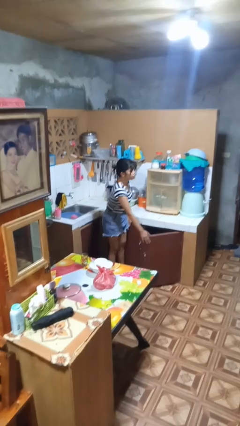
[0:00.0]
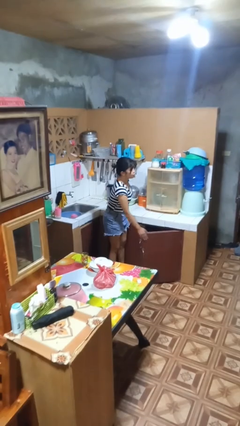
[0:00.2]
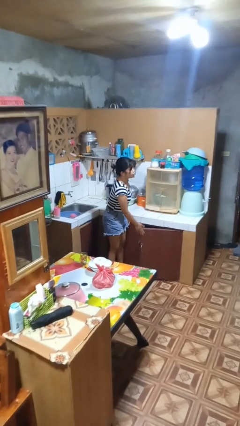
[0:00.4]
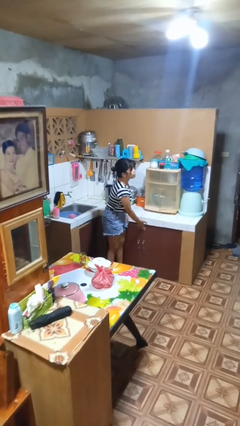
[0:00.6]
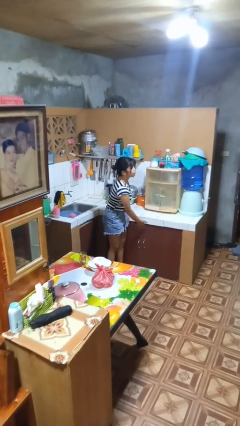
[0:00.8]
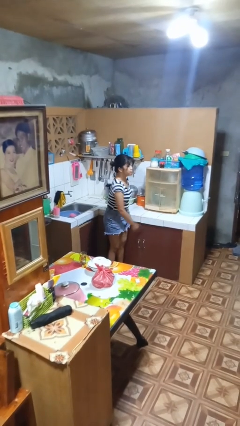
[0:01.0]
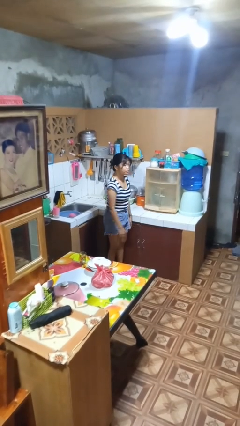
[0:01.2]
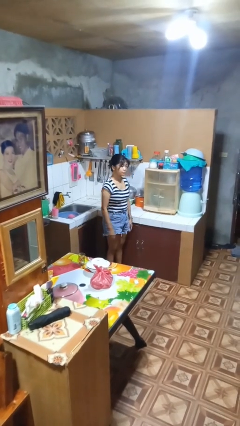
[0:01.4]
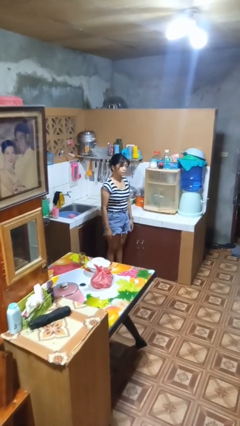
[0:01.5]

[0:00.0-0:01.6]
person closes cabinet

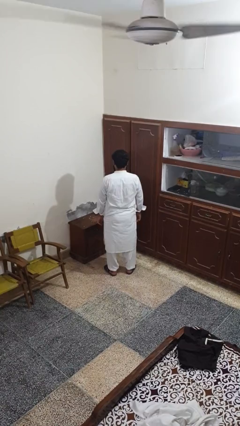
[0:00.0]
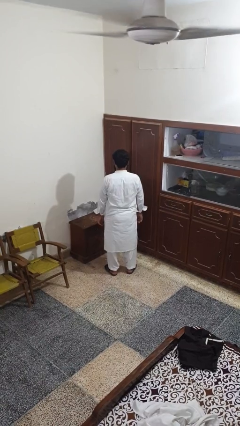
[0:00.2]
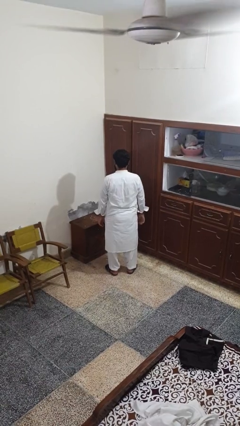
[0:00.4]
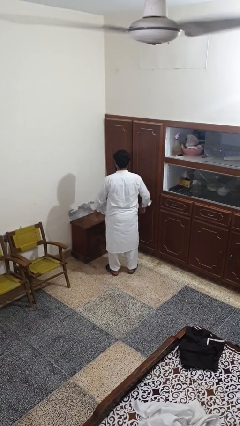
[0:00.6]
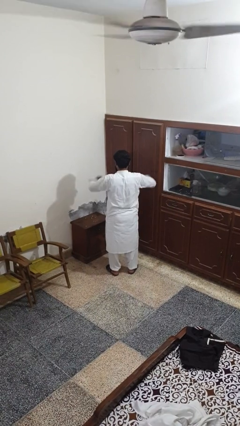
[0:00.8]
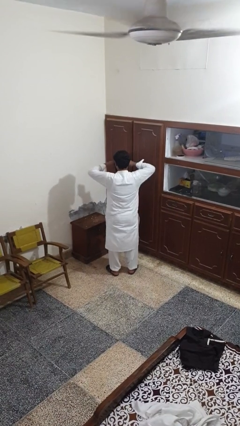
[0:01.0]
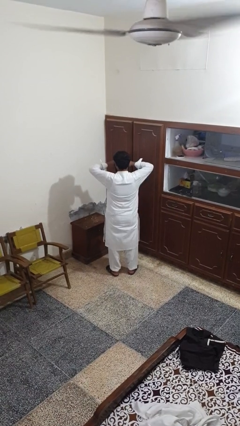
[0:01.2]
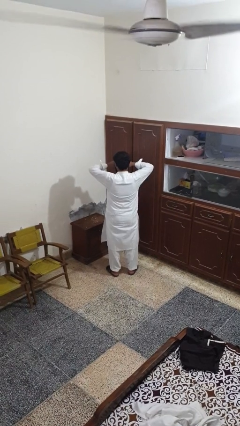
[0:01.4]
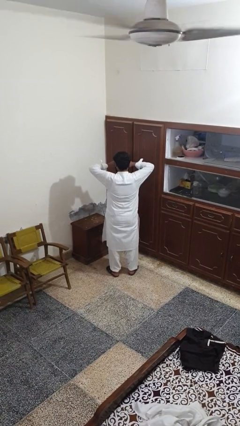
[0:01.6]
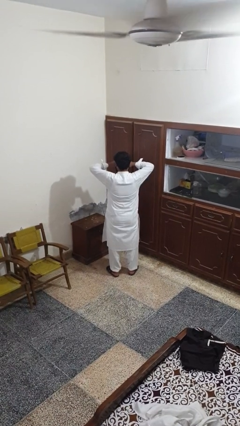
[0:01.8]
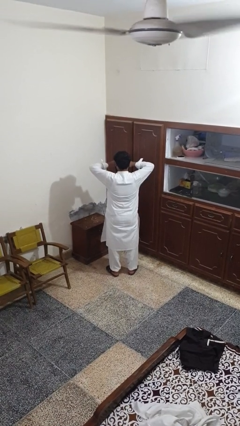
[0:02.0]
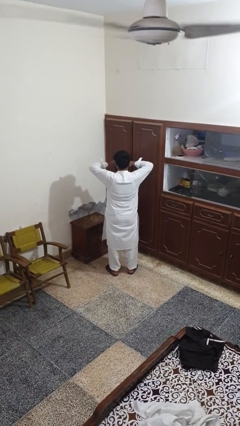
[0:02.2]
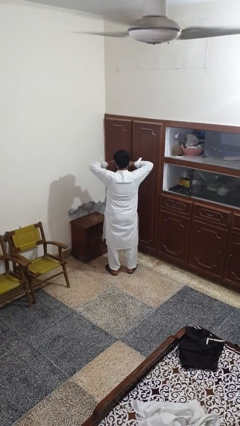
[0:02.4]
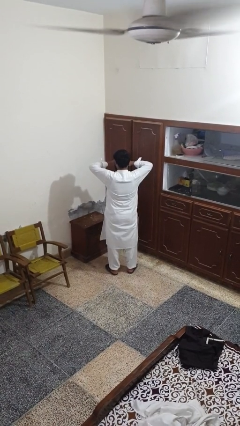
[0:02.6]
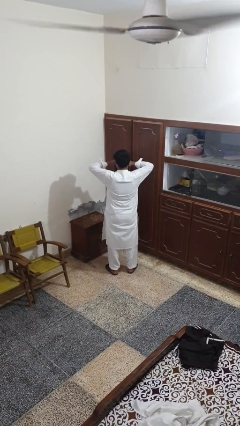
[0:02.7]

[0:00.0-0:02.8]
person rubs eyes

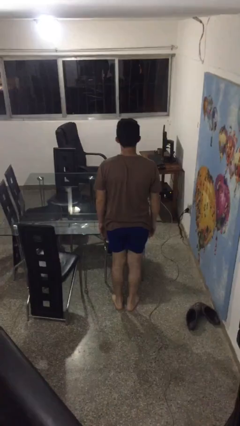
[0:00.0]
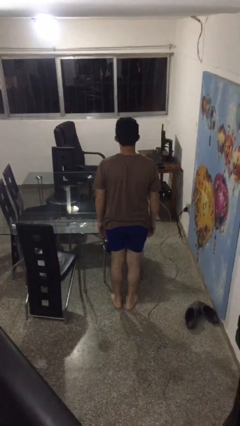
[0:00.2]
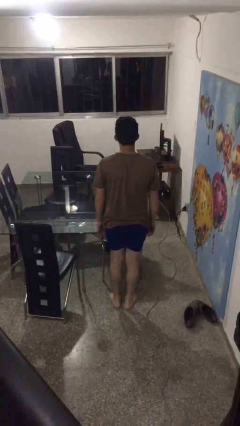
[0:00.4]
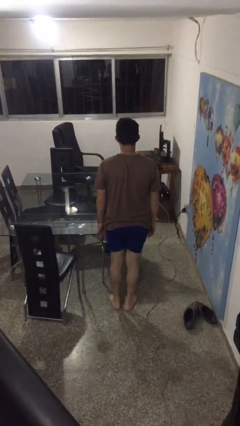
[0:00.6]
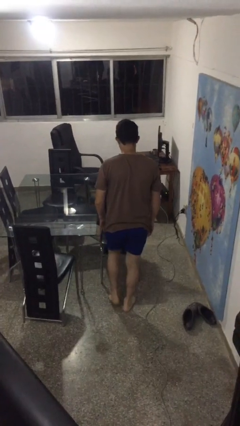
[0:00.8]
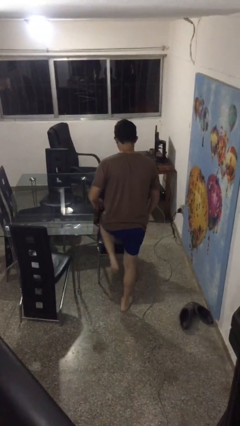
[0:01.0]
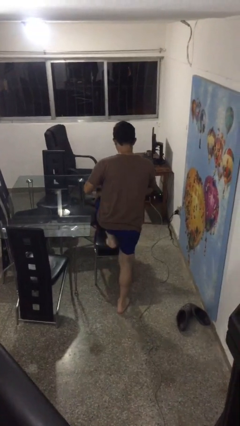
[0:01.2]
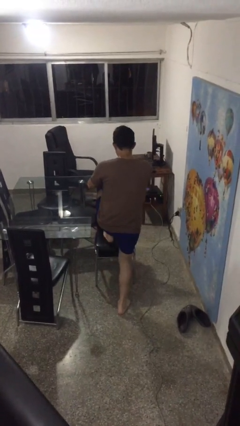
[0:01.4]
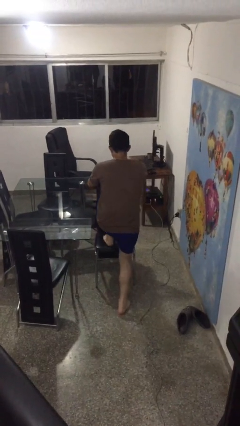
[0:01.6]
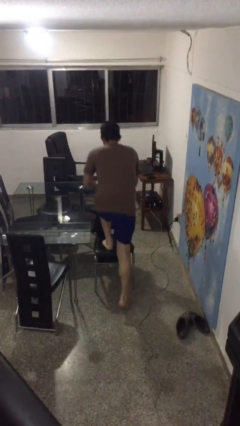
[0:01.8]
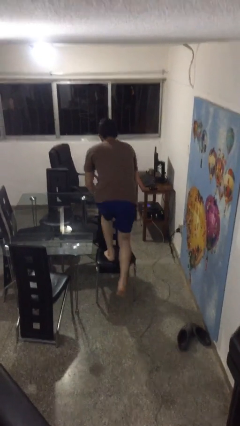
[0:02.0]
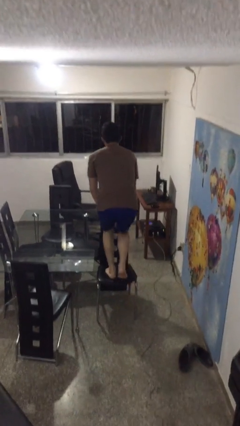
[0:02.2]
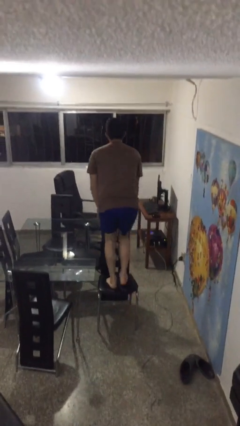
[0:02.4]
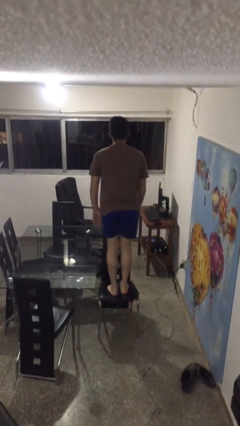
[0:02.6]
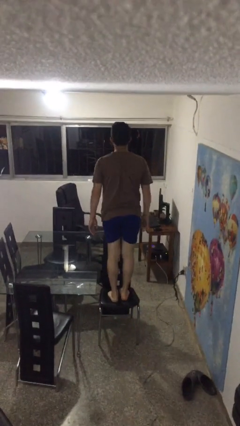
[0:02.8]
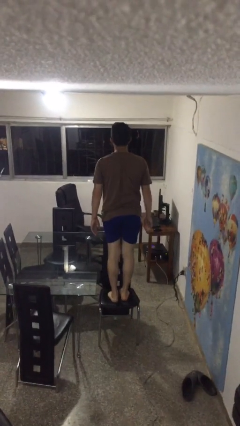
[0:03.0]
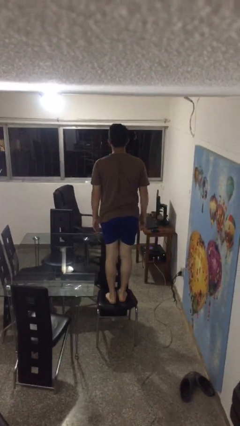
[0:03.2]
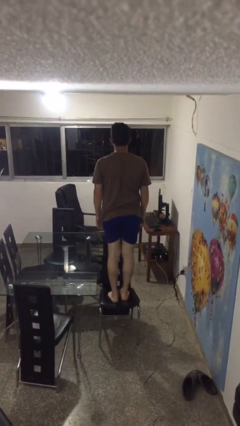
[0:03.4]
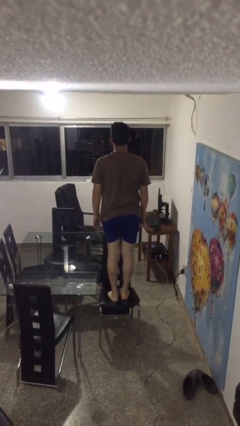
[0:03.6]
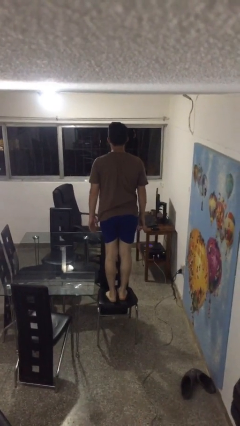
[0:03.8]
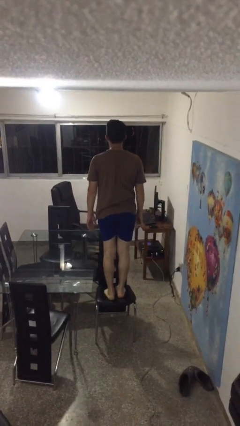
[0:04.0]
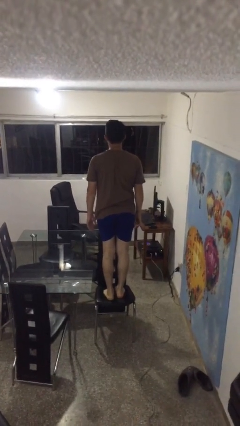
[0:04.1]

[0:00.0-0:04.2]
person climbs on chair

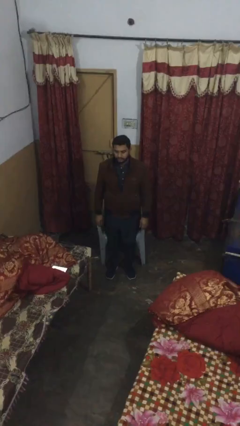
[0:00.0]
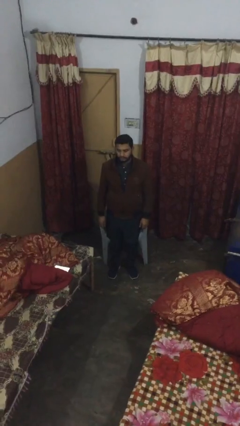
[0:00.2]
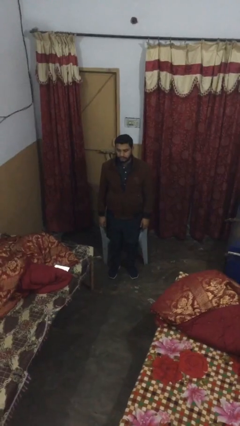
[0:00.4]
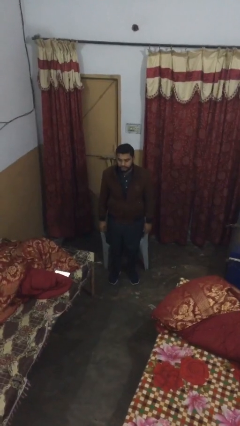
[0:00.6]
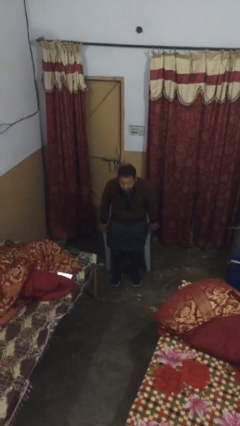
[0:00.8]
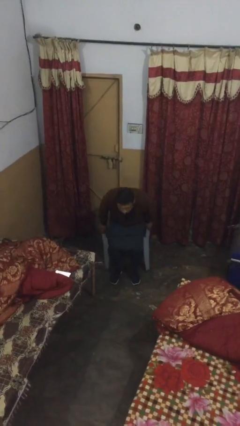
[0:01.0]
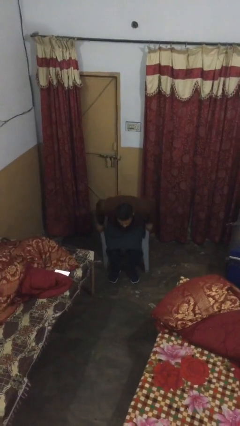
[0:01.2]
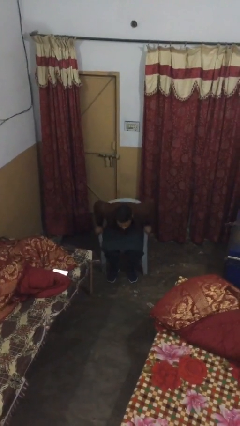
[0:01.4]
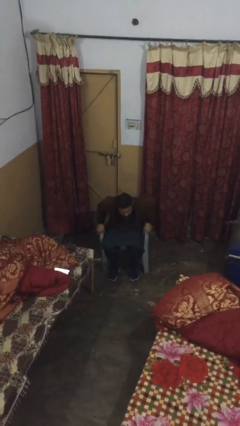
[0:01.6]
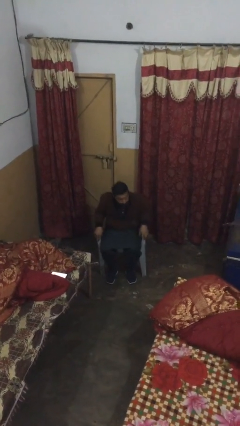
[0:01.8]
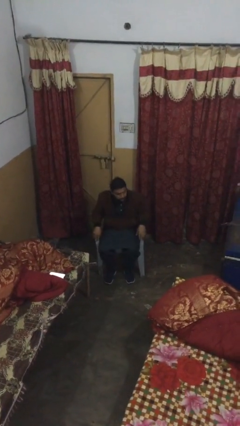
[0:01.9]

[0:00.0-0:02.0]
person sits down

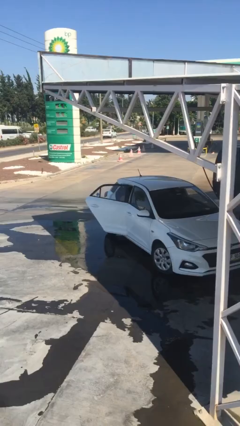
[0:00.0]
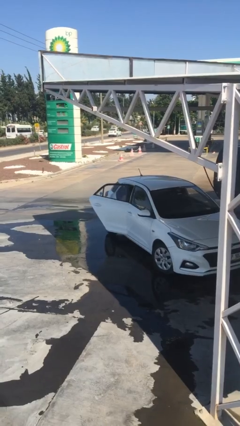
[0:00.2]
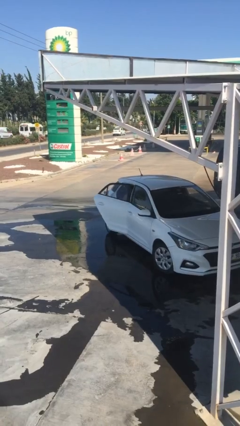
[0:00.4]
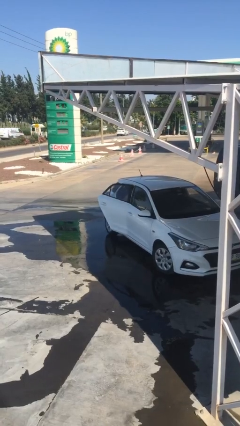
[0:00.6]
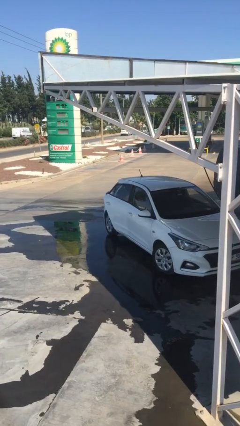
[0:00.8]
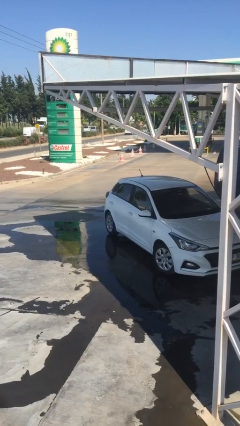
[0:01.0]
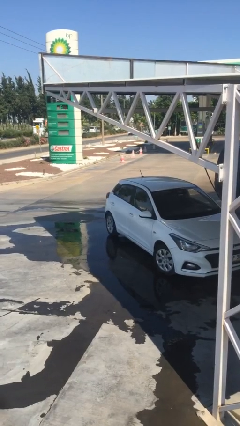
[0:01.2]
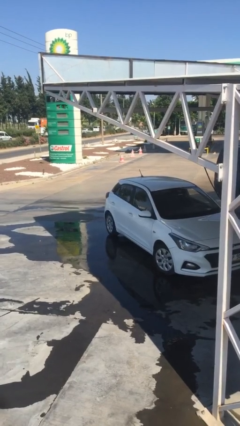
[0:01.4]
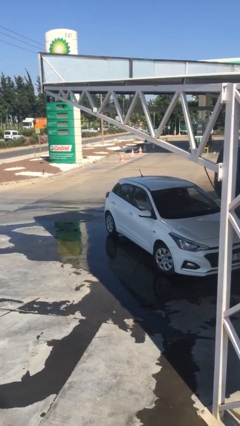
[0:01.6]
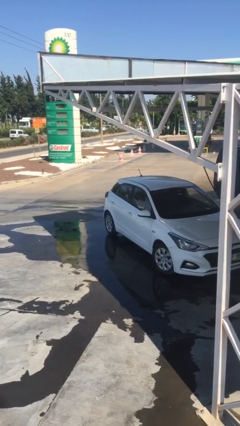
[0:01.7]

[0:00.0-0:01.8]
person closes car door

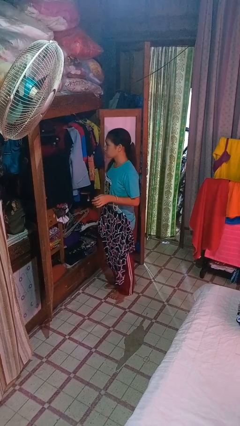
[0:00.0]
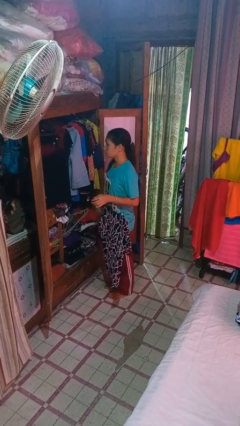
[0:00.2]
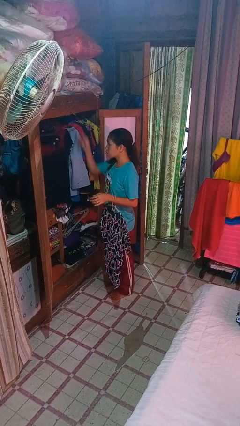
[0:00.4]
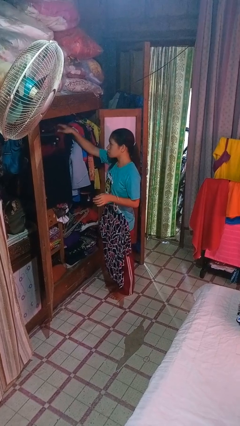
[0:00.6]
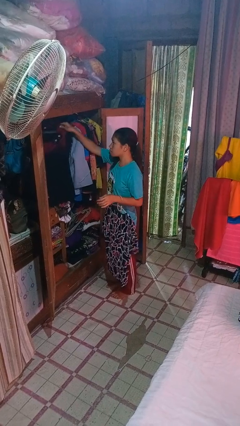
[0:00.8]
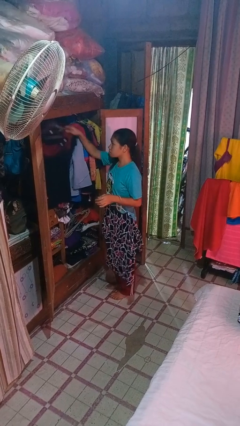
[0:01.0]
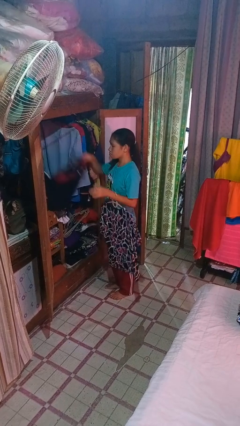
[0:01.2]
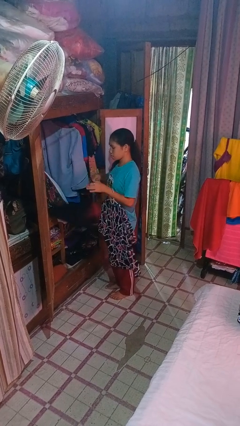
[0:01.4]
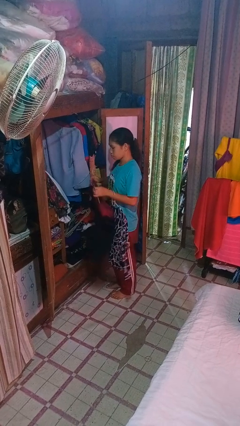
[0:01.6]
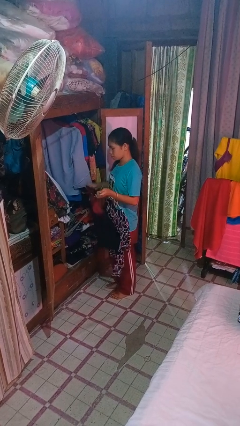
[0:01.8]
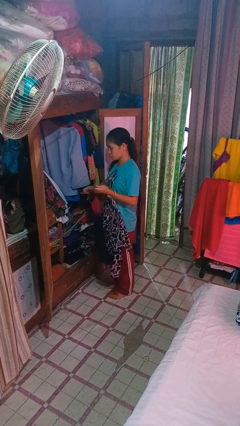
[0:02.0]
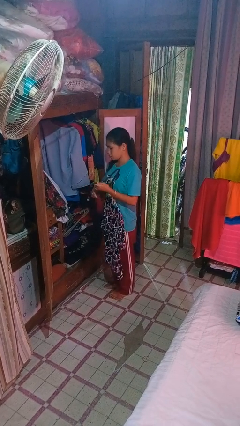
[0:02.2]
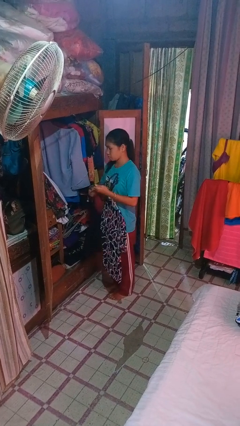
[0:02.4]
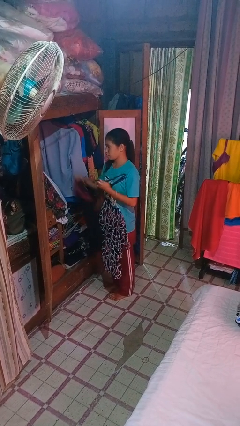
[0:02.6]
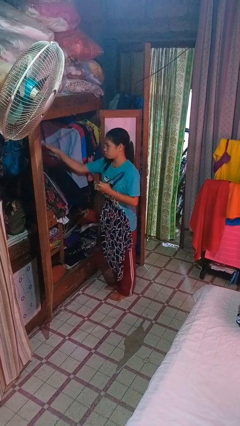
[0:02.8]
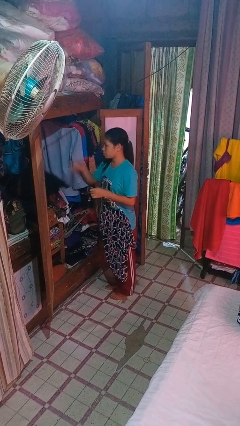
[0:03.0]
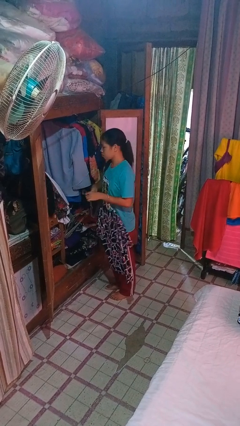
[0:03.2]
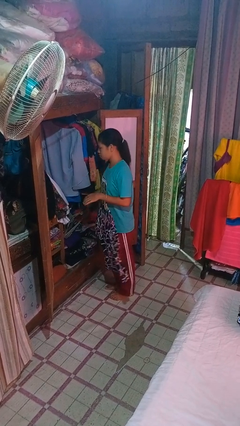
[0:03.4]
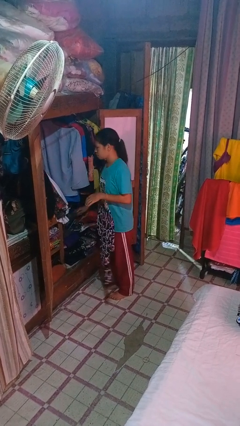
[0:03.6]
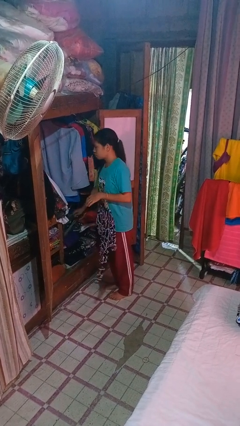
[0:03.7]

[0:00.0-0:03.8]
person takes clothes from closet

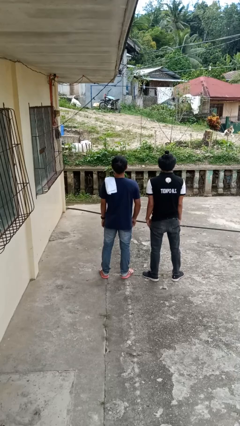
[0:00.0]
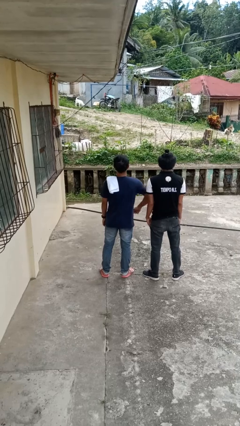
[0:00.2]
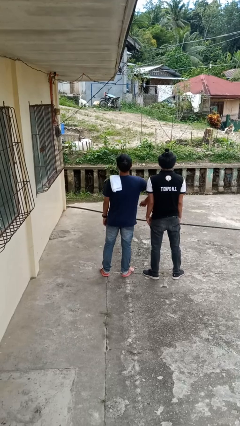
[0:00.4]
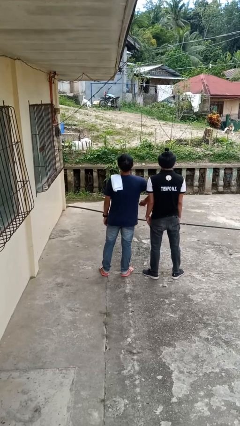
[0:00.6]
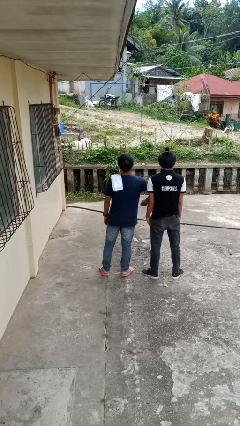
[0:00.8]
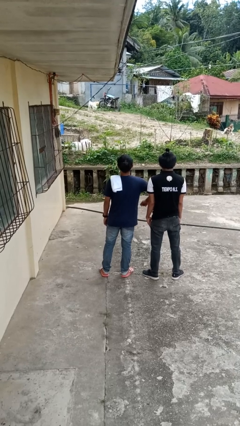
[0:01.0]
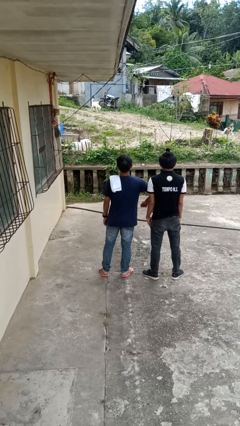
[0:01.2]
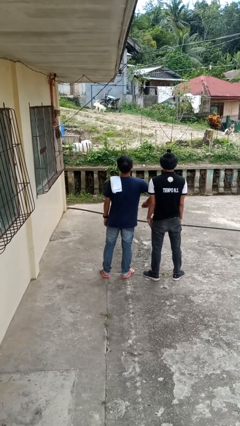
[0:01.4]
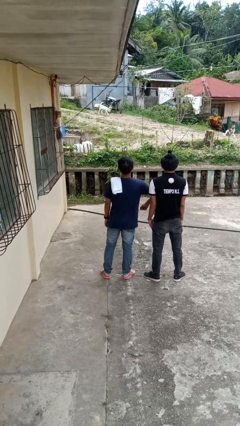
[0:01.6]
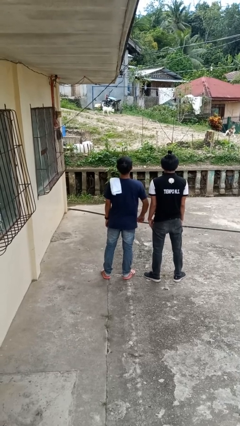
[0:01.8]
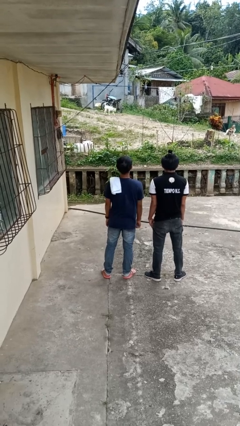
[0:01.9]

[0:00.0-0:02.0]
person nudges person with elbow
